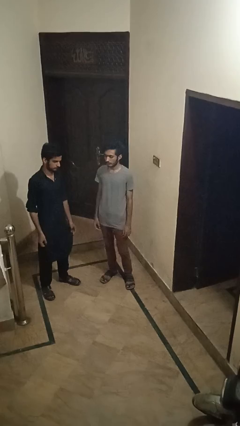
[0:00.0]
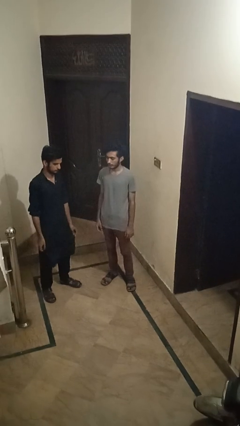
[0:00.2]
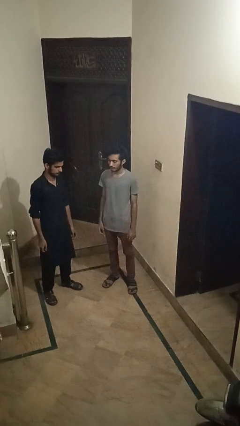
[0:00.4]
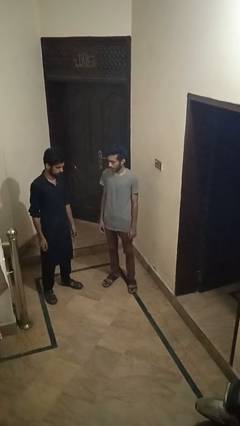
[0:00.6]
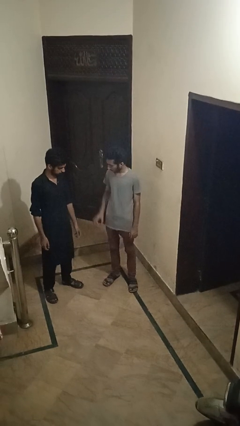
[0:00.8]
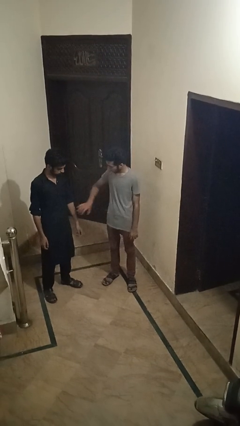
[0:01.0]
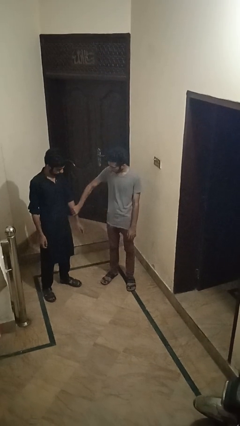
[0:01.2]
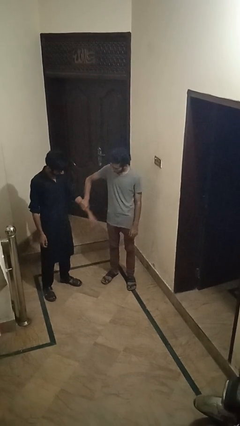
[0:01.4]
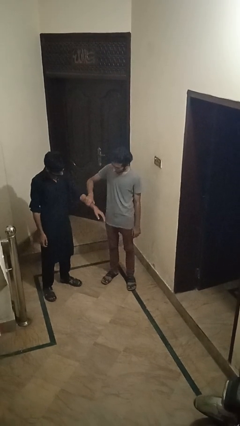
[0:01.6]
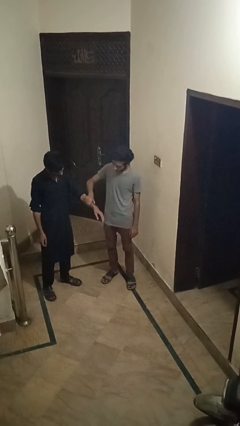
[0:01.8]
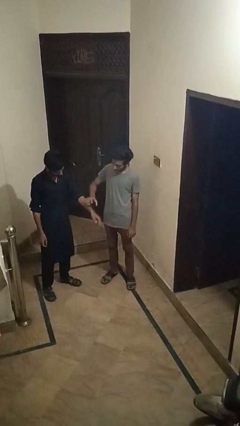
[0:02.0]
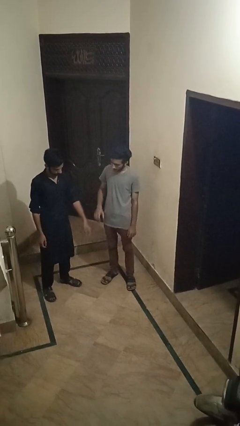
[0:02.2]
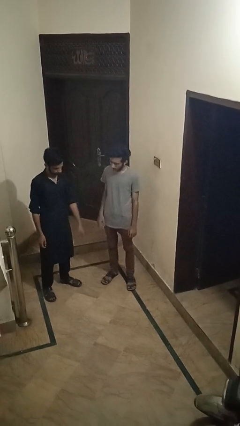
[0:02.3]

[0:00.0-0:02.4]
person grabs person by forearm

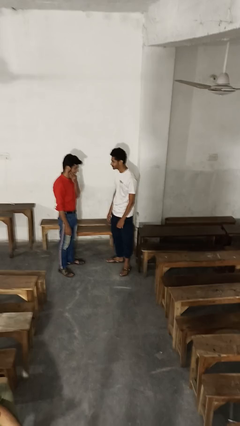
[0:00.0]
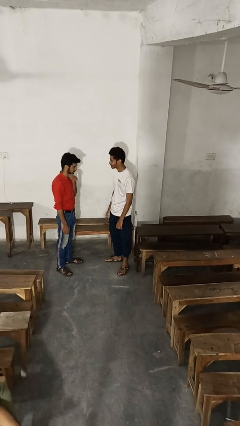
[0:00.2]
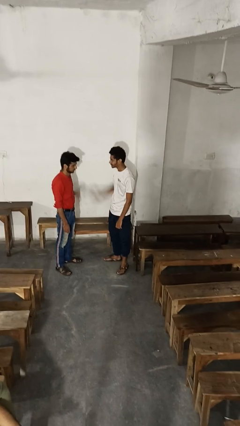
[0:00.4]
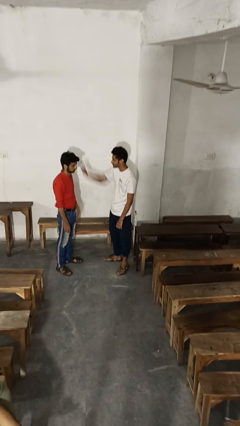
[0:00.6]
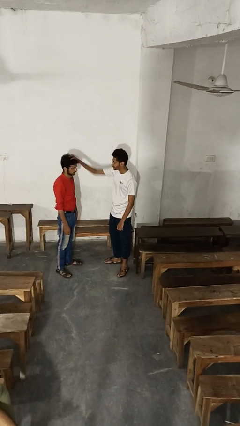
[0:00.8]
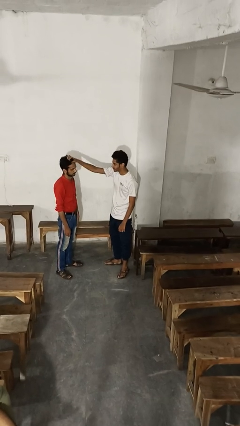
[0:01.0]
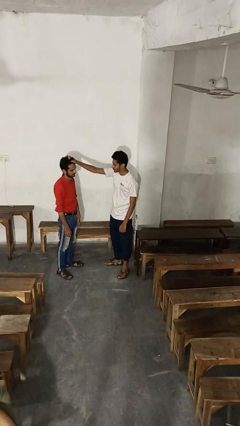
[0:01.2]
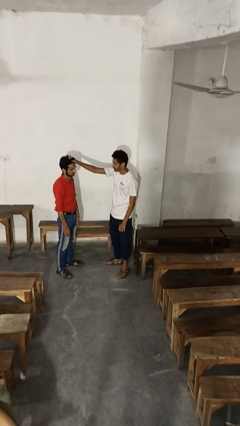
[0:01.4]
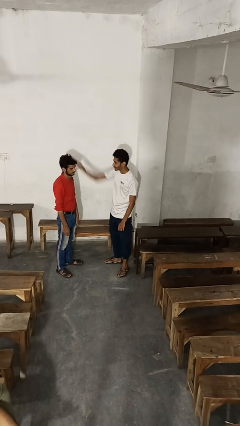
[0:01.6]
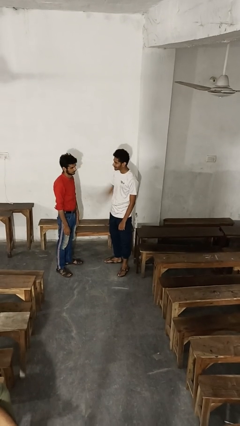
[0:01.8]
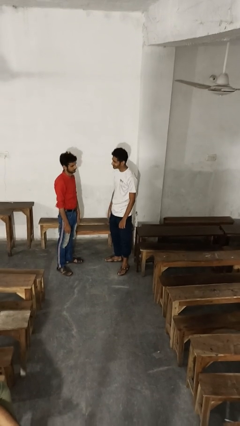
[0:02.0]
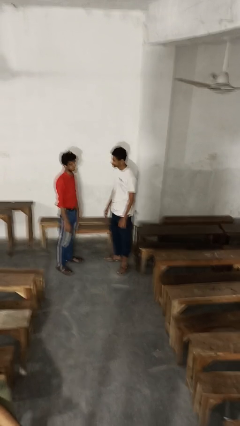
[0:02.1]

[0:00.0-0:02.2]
person grabs person by hair

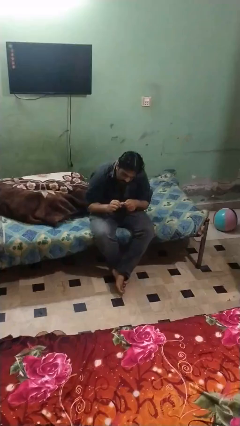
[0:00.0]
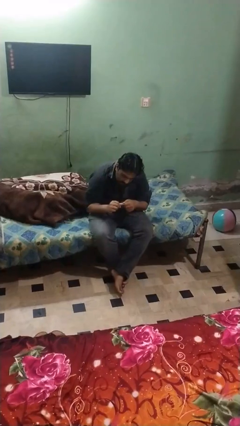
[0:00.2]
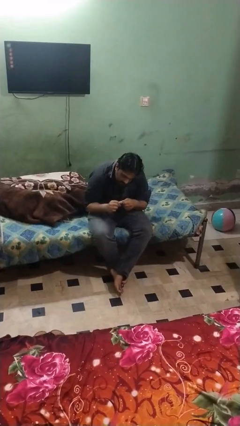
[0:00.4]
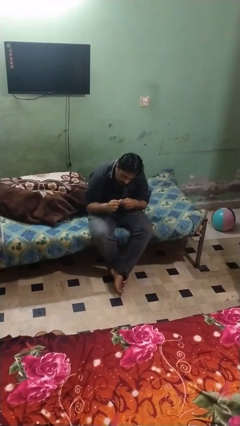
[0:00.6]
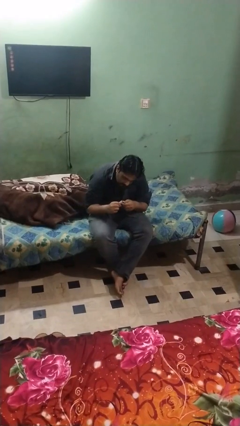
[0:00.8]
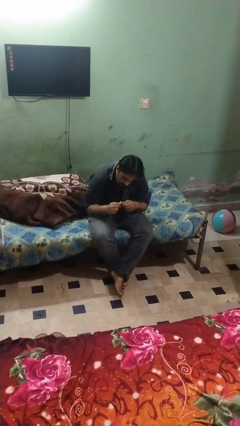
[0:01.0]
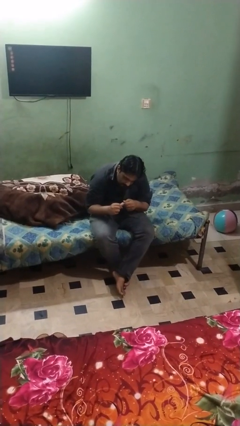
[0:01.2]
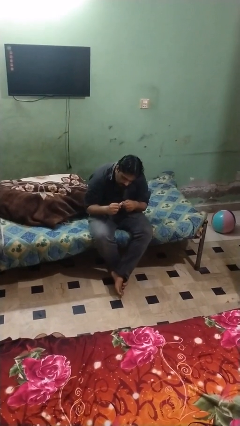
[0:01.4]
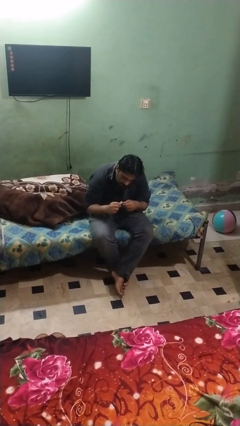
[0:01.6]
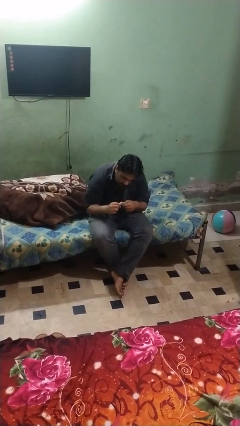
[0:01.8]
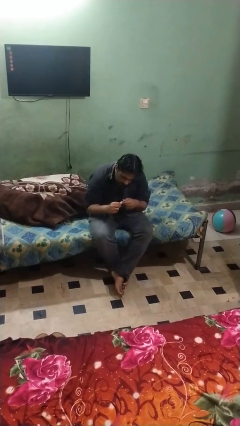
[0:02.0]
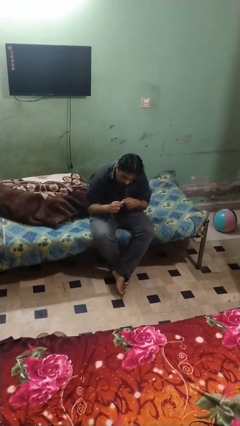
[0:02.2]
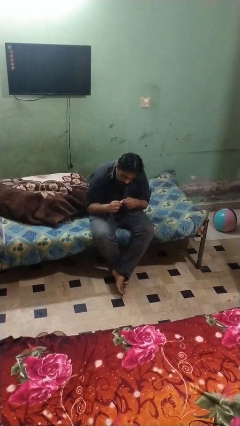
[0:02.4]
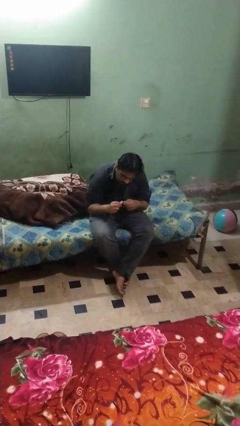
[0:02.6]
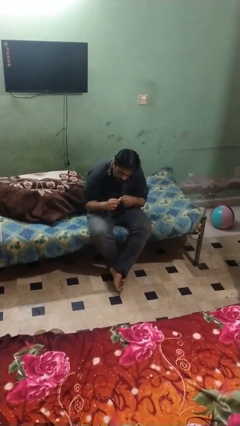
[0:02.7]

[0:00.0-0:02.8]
person files fingernails

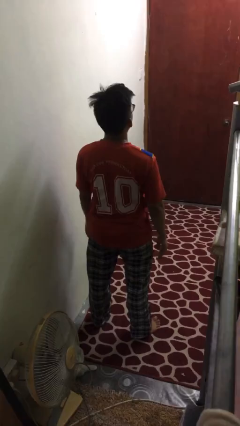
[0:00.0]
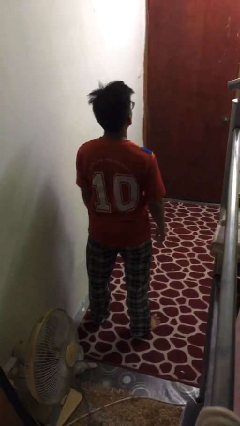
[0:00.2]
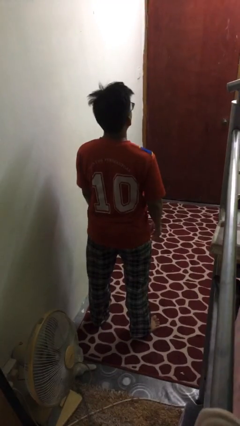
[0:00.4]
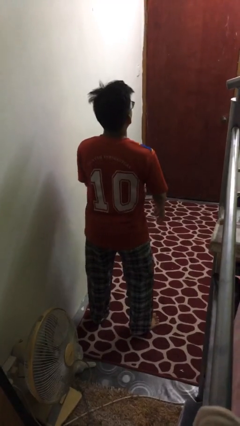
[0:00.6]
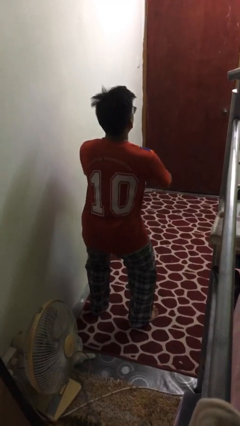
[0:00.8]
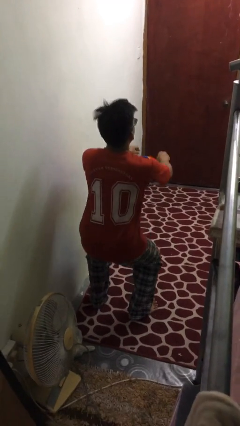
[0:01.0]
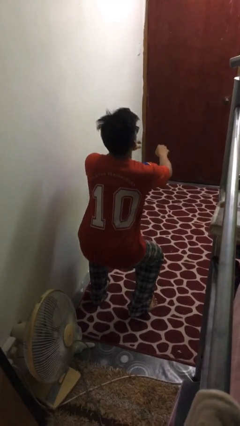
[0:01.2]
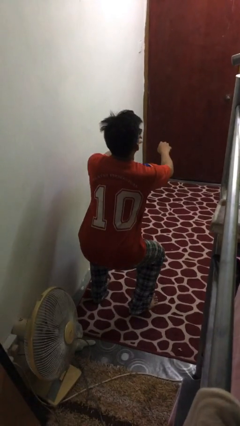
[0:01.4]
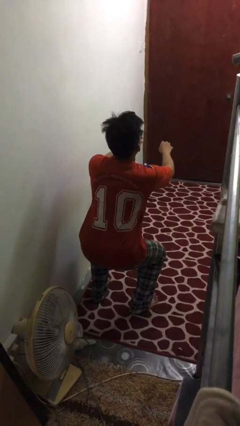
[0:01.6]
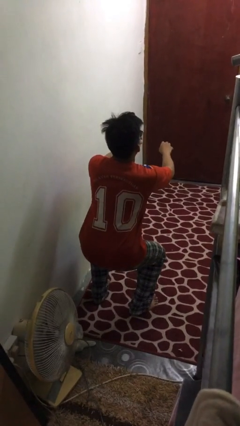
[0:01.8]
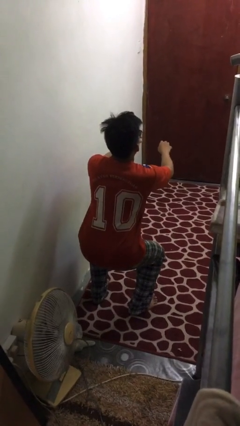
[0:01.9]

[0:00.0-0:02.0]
person squats
